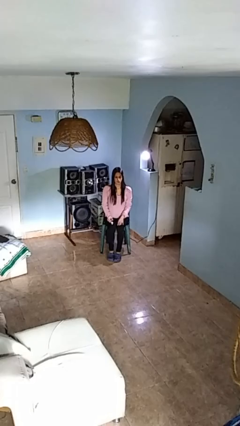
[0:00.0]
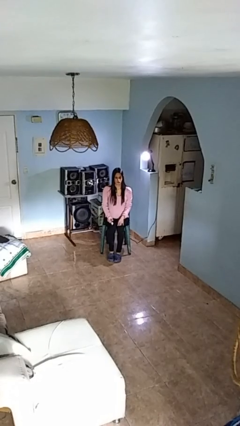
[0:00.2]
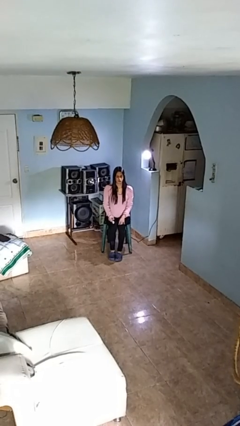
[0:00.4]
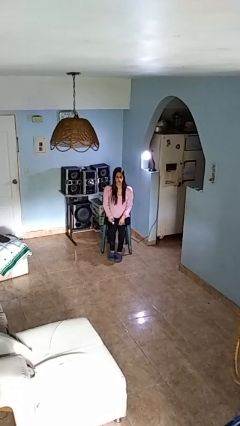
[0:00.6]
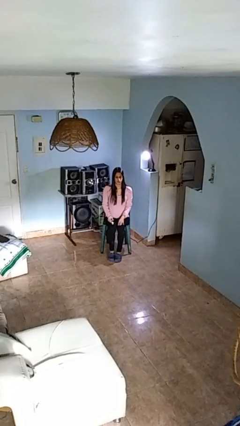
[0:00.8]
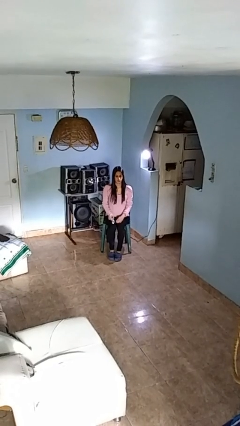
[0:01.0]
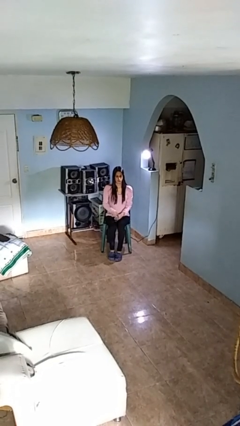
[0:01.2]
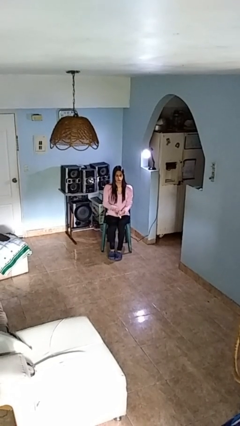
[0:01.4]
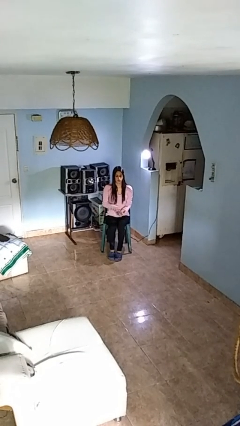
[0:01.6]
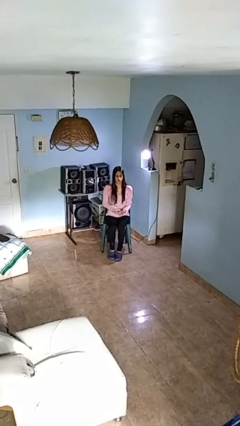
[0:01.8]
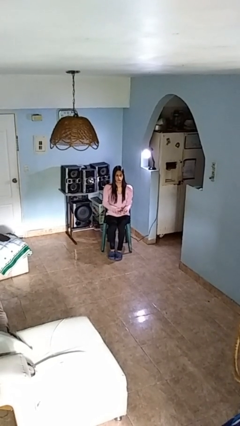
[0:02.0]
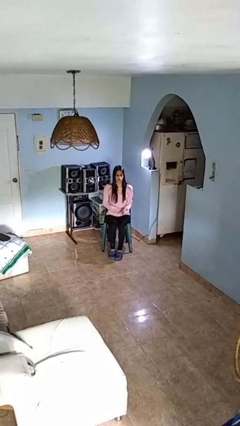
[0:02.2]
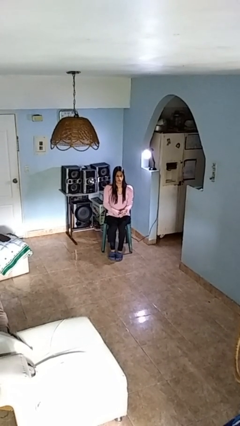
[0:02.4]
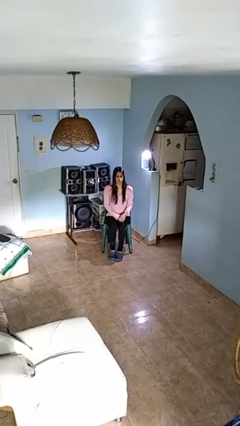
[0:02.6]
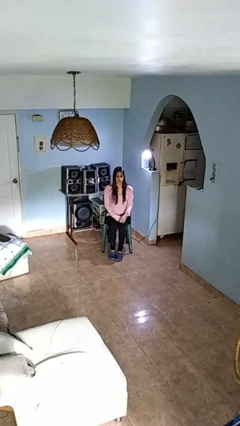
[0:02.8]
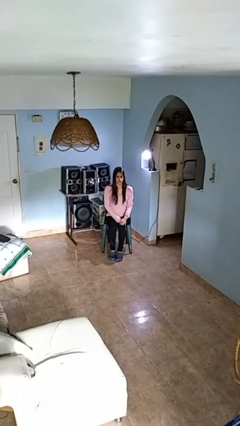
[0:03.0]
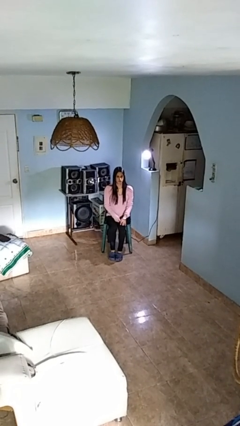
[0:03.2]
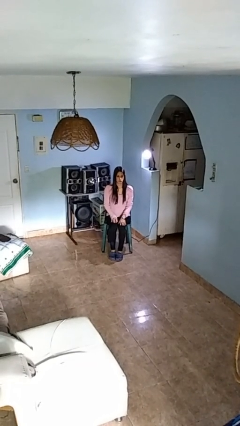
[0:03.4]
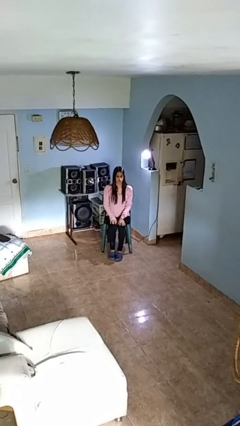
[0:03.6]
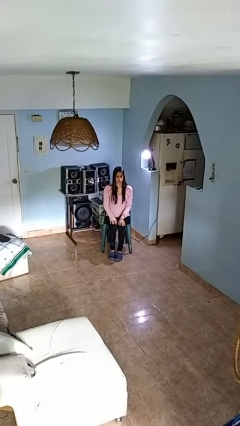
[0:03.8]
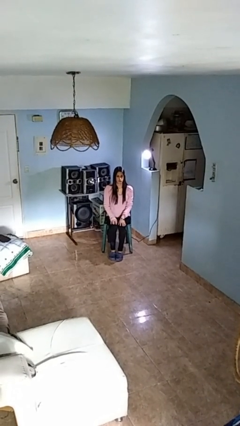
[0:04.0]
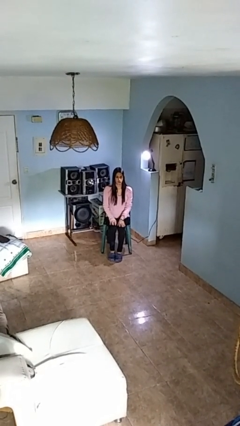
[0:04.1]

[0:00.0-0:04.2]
person puts on wristwatch

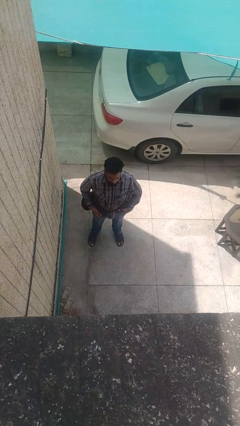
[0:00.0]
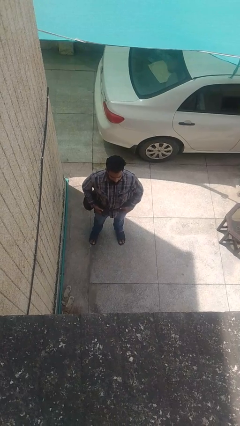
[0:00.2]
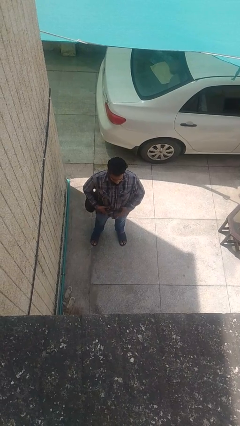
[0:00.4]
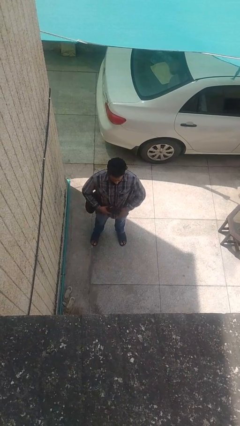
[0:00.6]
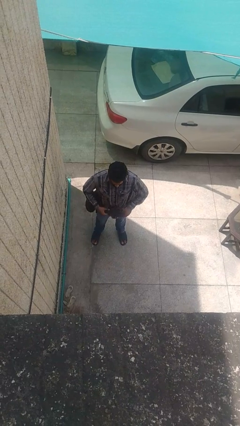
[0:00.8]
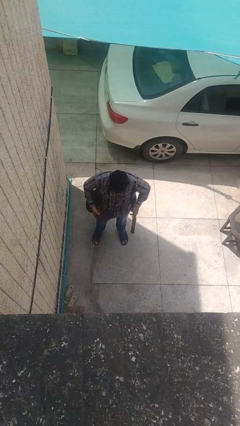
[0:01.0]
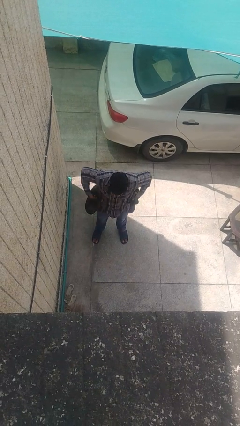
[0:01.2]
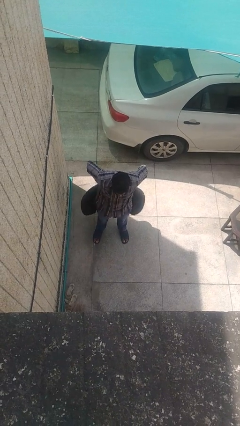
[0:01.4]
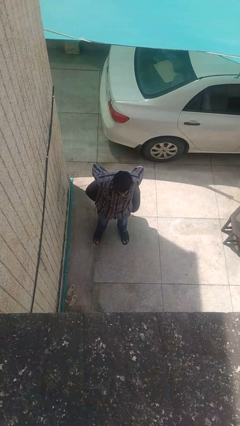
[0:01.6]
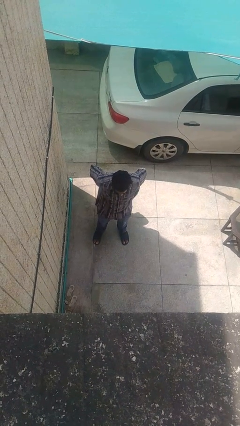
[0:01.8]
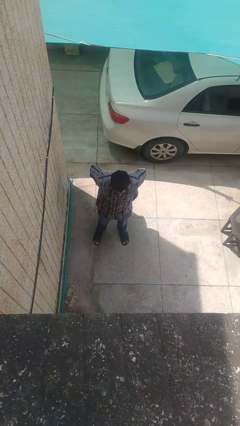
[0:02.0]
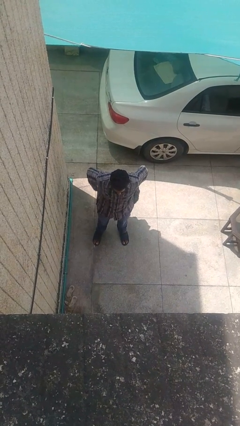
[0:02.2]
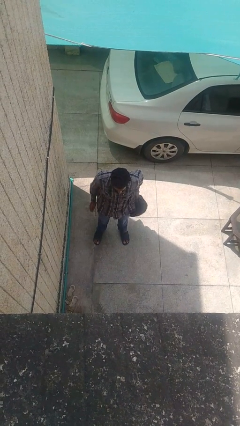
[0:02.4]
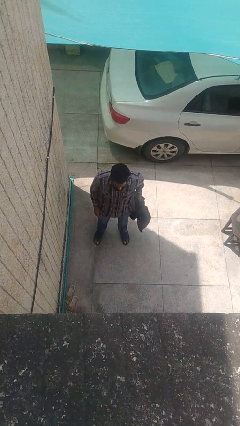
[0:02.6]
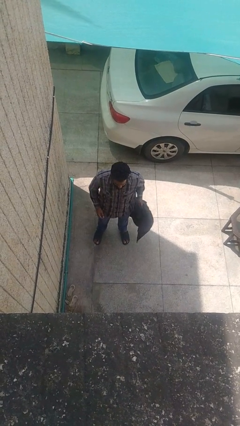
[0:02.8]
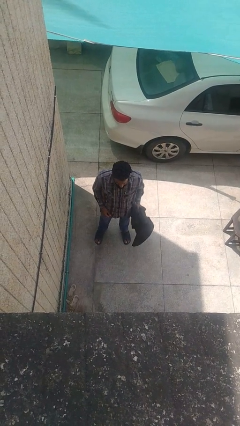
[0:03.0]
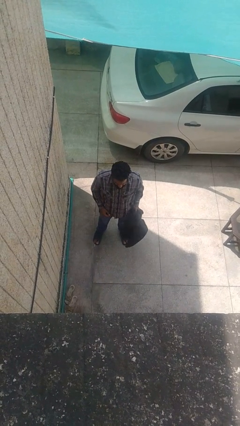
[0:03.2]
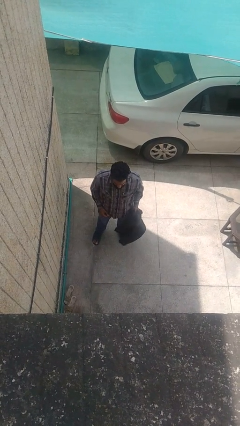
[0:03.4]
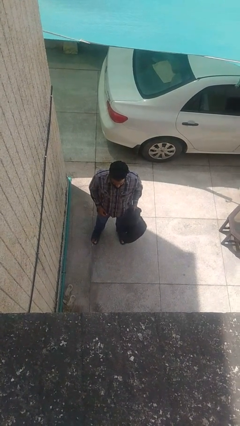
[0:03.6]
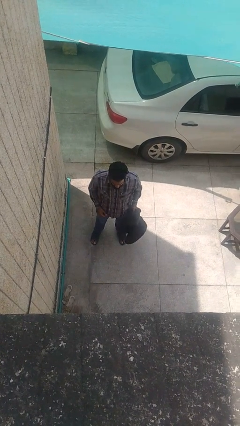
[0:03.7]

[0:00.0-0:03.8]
person unties jacket around waist

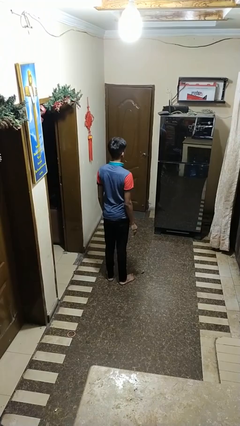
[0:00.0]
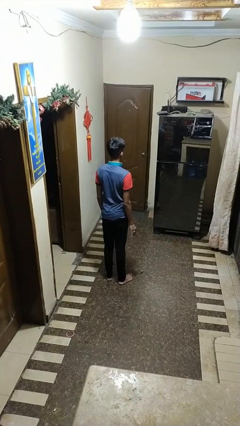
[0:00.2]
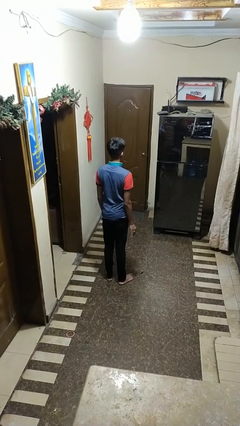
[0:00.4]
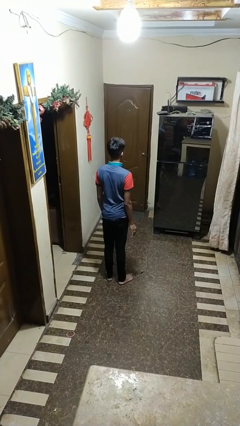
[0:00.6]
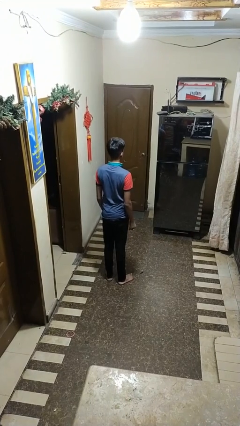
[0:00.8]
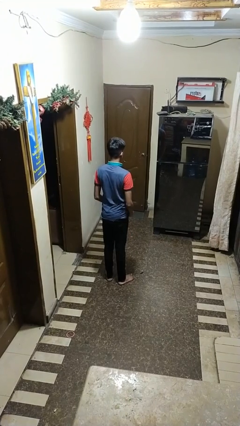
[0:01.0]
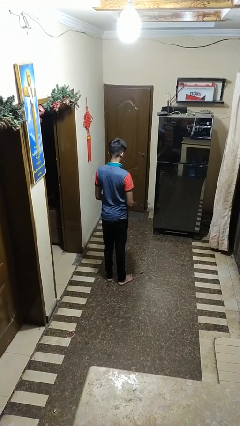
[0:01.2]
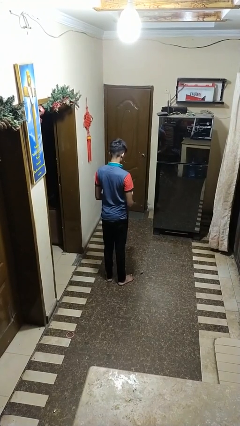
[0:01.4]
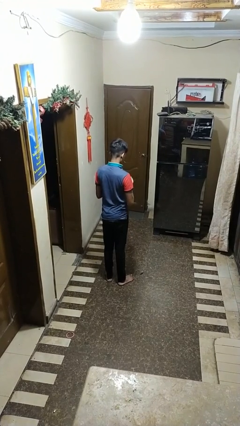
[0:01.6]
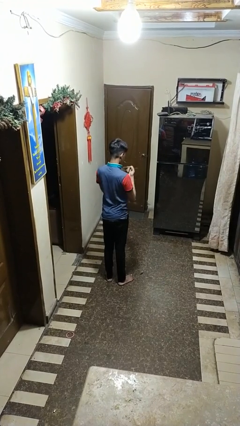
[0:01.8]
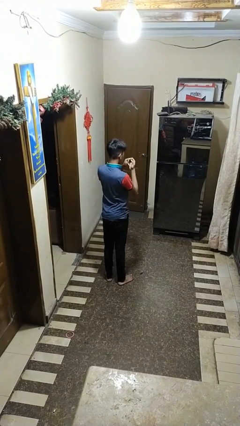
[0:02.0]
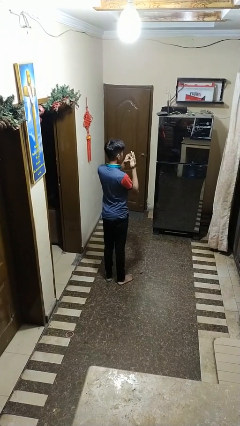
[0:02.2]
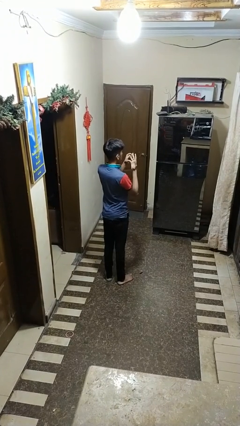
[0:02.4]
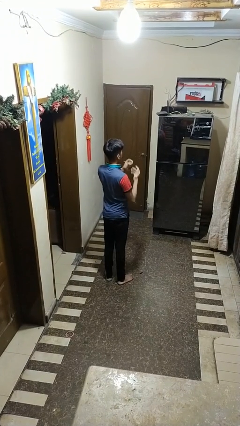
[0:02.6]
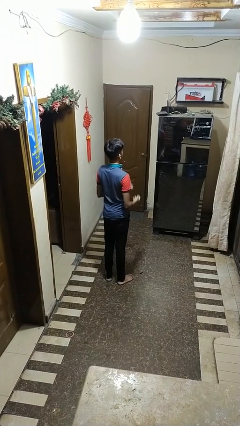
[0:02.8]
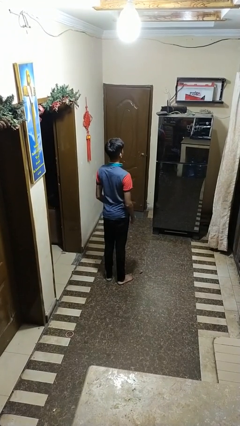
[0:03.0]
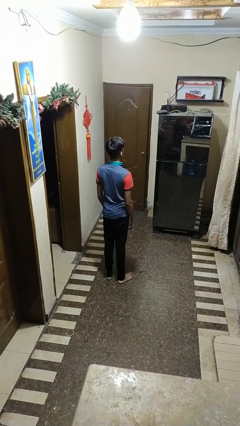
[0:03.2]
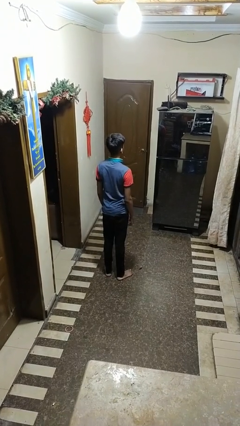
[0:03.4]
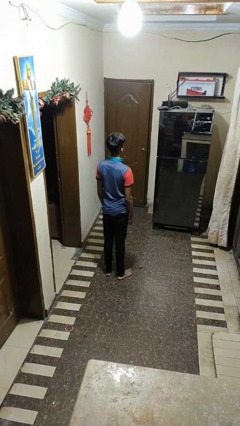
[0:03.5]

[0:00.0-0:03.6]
person takes off ring

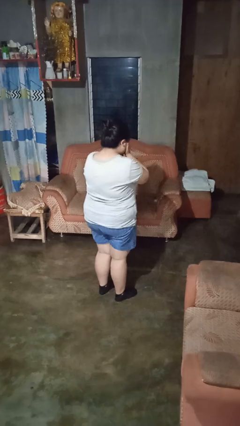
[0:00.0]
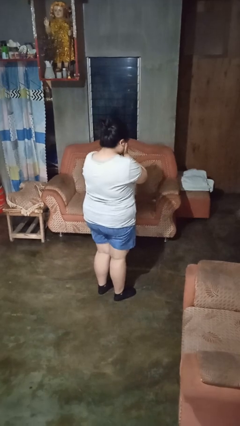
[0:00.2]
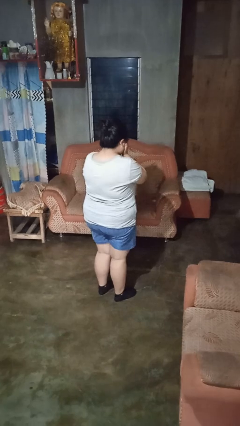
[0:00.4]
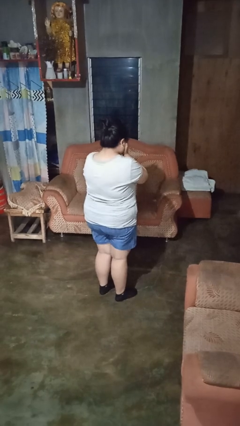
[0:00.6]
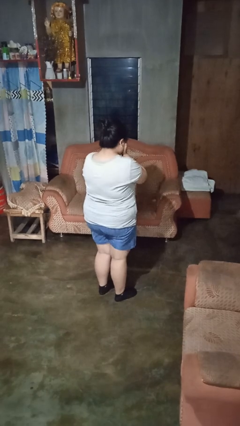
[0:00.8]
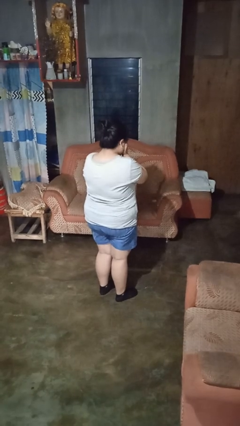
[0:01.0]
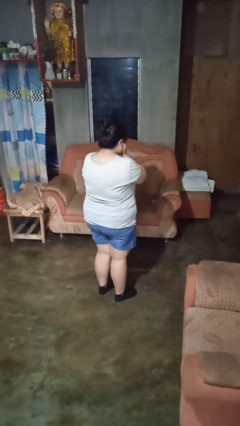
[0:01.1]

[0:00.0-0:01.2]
person covers face with hands

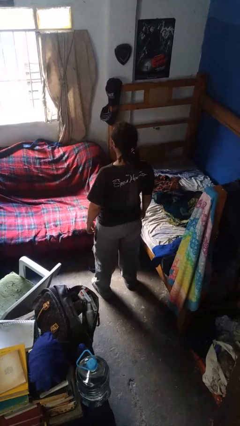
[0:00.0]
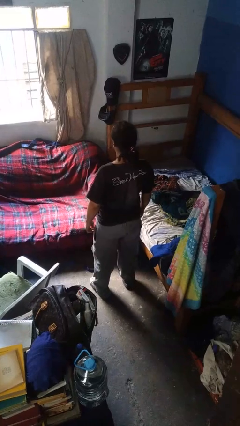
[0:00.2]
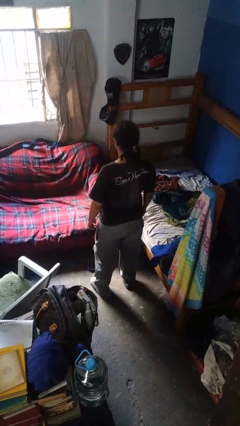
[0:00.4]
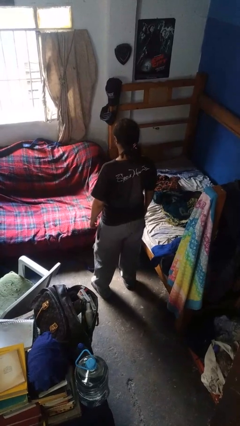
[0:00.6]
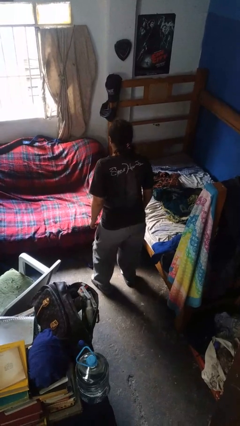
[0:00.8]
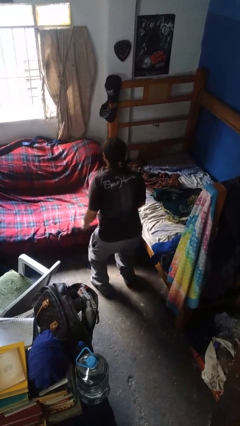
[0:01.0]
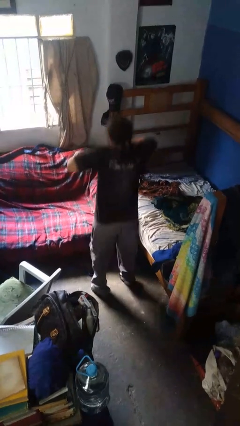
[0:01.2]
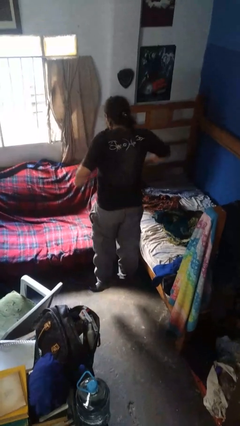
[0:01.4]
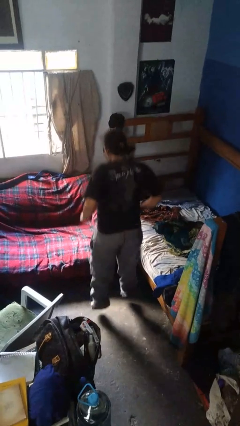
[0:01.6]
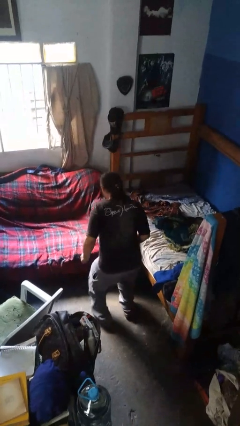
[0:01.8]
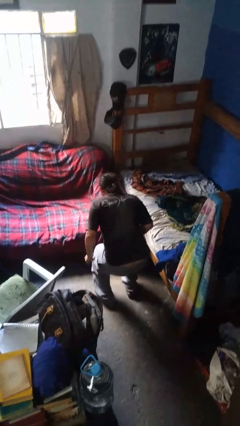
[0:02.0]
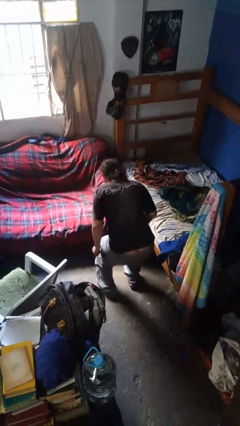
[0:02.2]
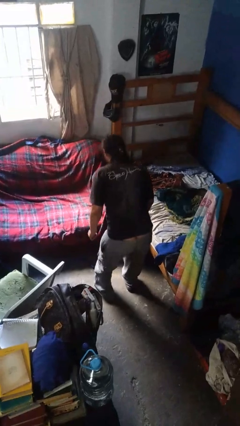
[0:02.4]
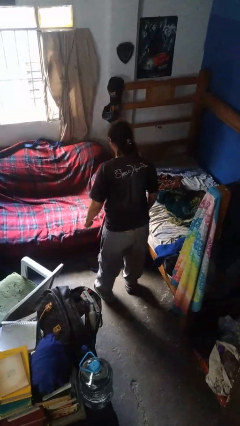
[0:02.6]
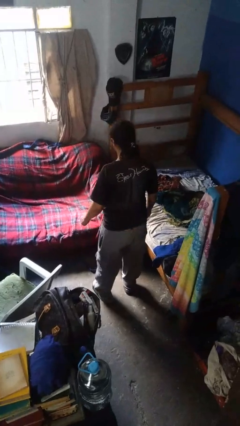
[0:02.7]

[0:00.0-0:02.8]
person jumps

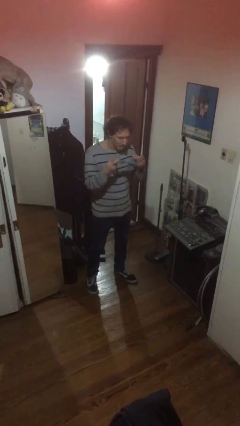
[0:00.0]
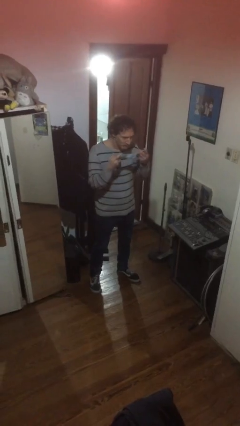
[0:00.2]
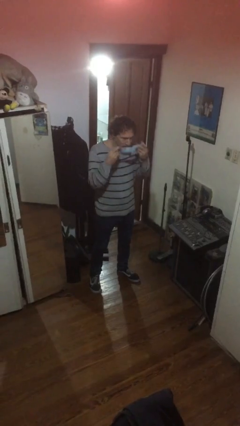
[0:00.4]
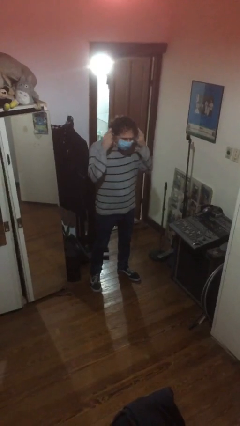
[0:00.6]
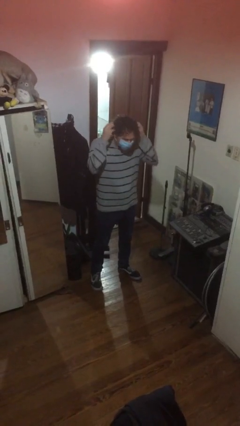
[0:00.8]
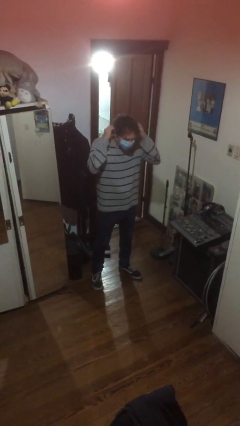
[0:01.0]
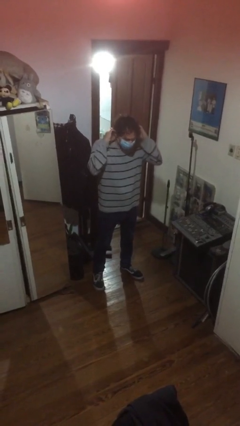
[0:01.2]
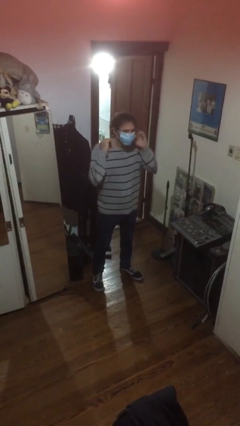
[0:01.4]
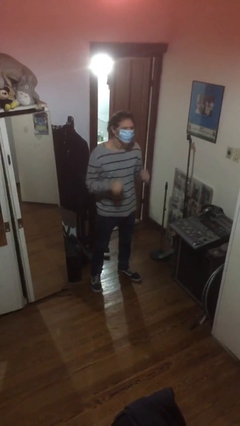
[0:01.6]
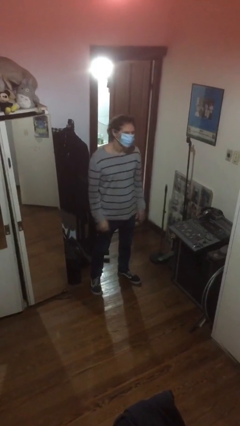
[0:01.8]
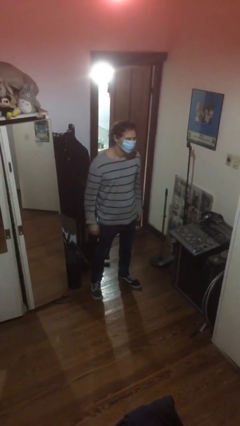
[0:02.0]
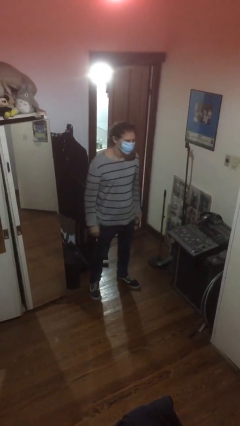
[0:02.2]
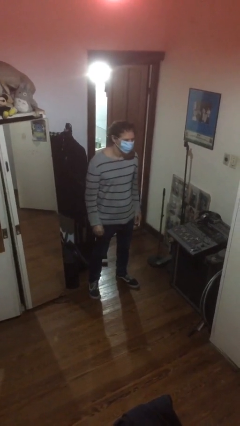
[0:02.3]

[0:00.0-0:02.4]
person puts on facemask
